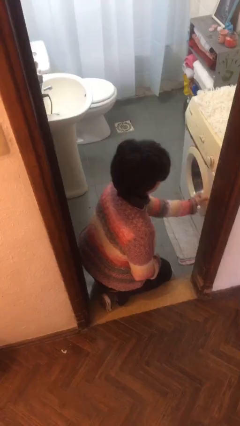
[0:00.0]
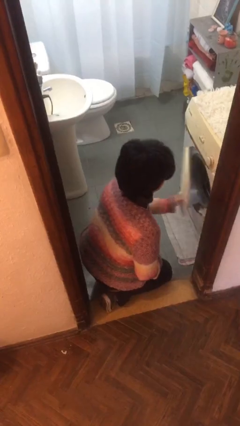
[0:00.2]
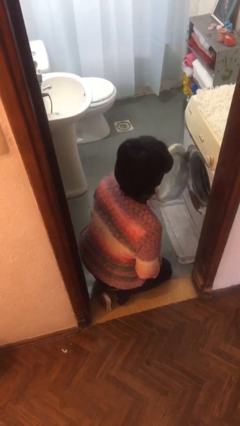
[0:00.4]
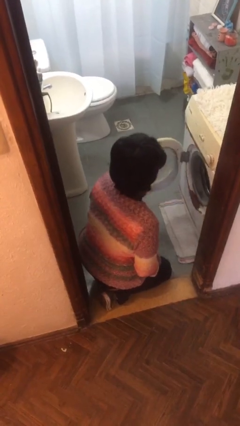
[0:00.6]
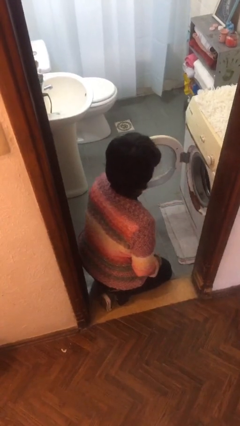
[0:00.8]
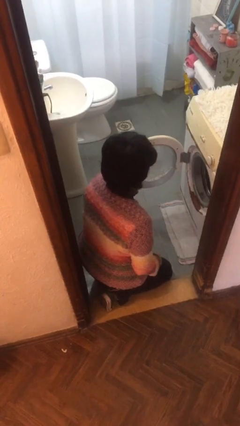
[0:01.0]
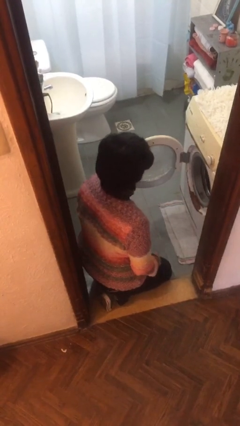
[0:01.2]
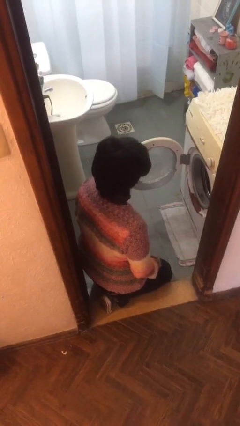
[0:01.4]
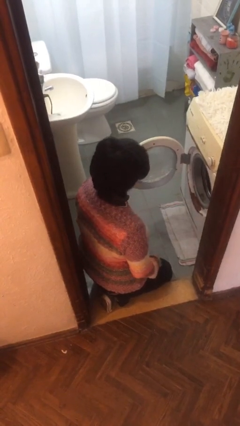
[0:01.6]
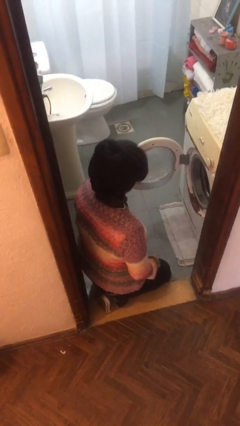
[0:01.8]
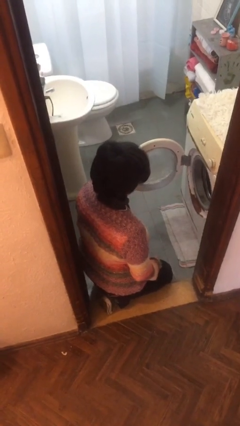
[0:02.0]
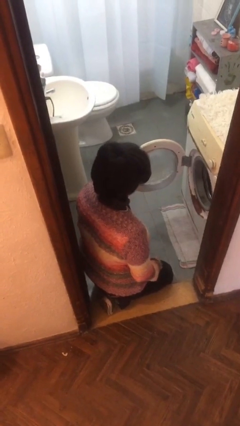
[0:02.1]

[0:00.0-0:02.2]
person opens clothes washer

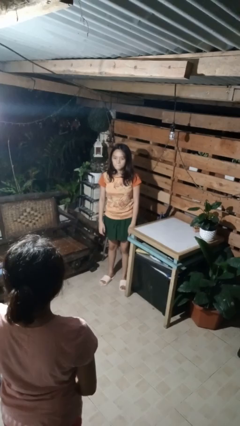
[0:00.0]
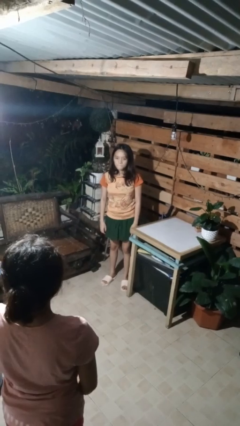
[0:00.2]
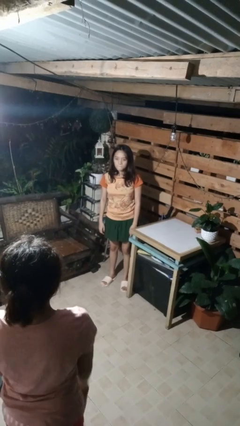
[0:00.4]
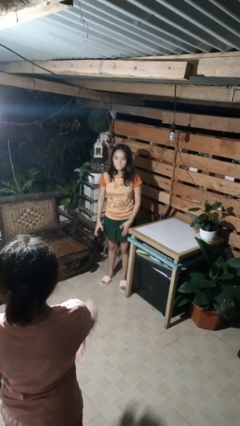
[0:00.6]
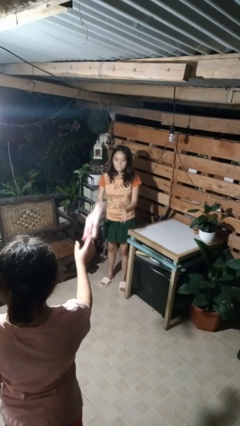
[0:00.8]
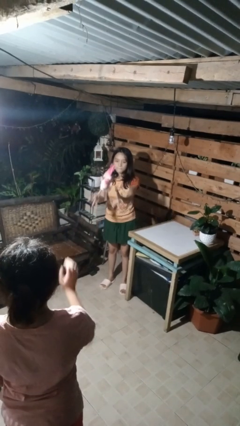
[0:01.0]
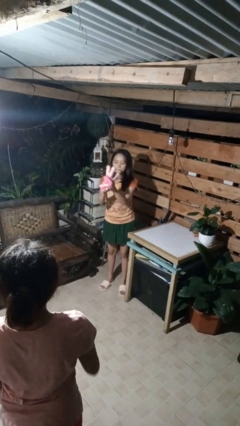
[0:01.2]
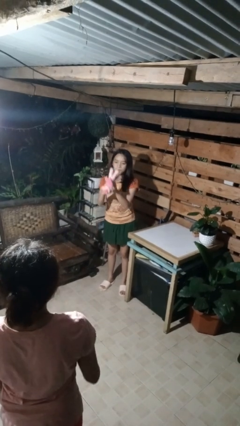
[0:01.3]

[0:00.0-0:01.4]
person catches object from person

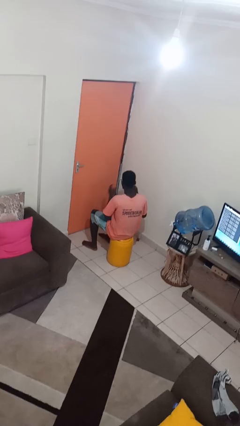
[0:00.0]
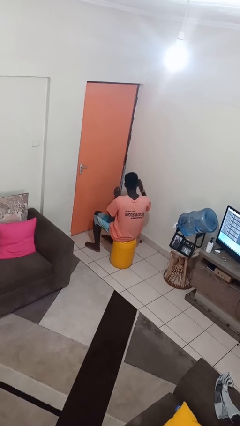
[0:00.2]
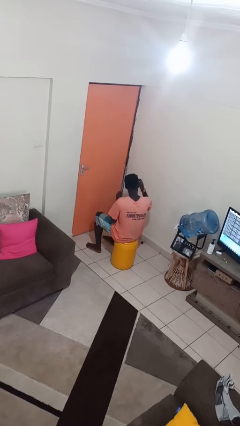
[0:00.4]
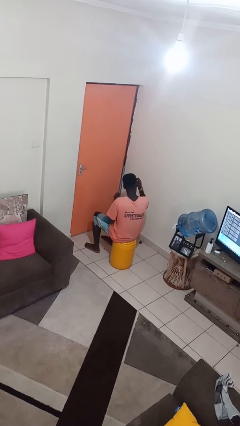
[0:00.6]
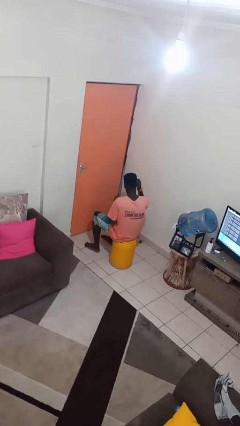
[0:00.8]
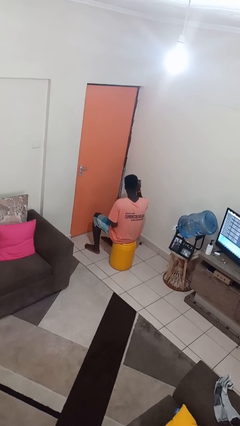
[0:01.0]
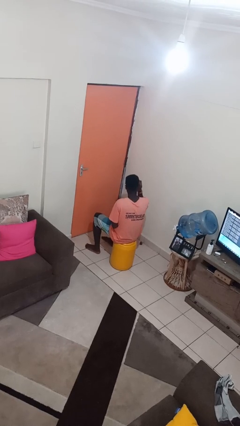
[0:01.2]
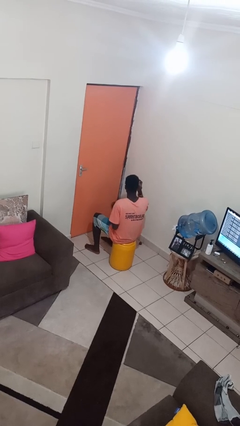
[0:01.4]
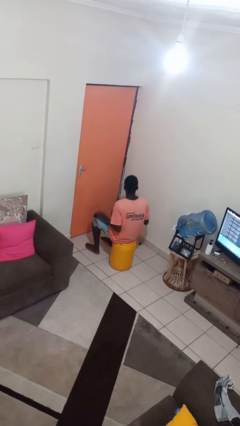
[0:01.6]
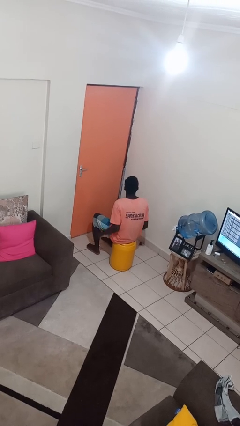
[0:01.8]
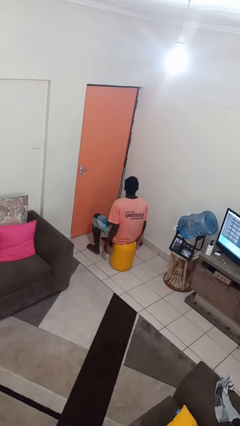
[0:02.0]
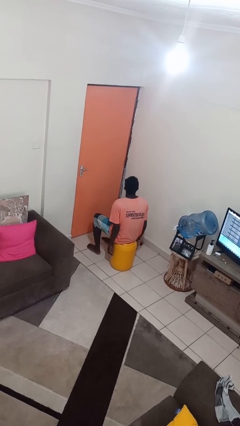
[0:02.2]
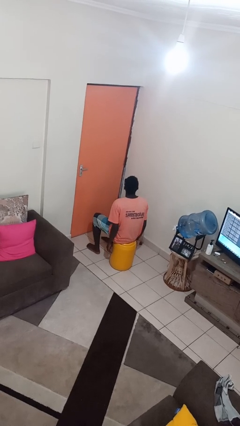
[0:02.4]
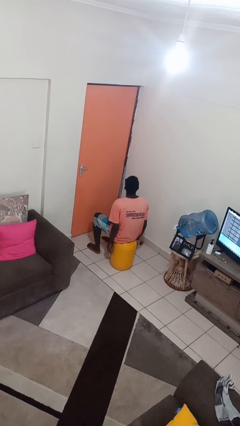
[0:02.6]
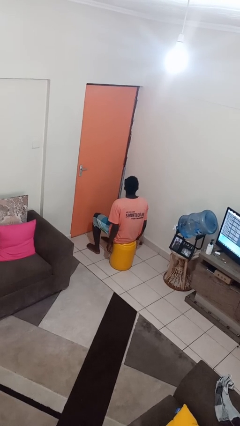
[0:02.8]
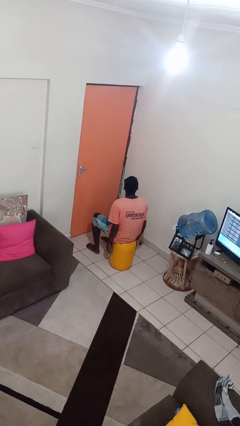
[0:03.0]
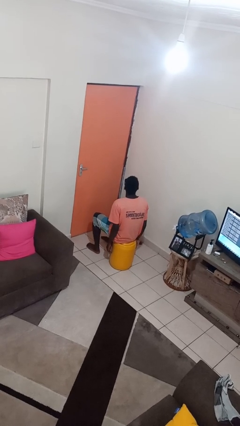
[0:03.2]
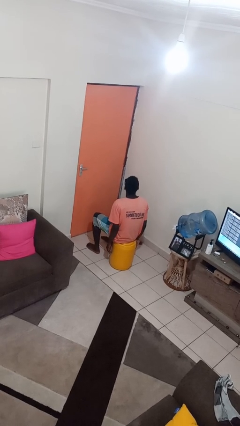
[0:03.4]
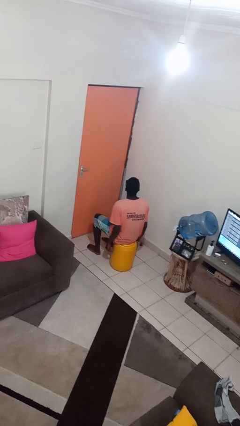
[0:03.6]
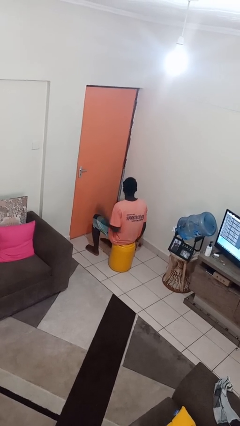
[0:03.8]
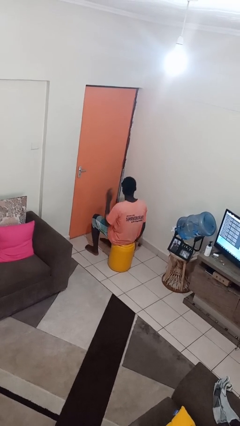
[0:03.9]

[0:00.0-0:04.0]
person puts on sunglasses

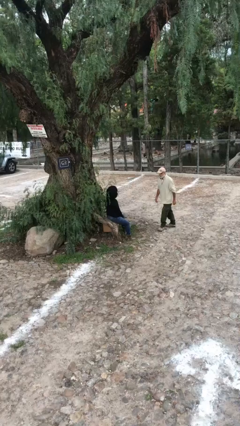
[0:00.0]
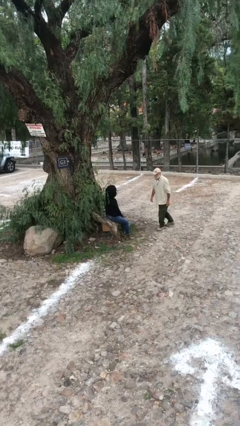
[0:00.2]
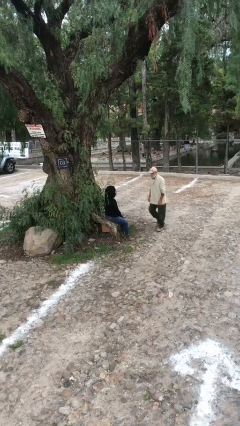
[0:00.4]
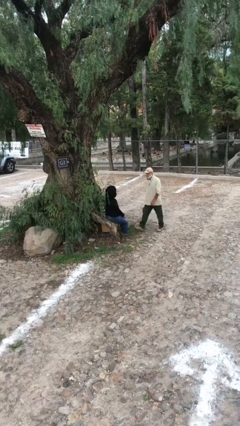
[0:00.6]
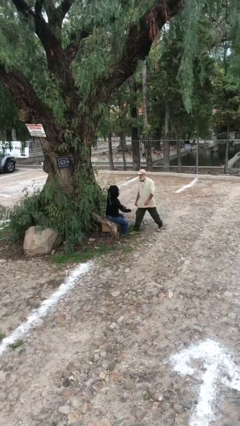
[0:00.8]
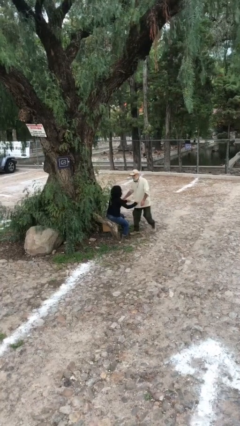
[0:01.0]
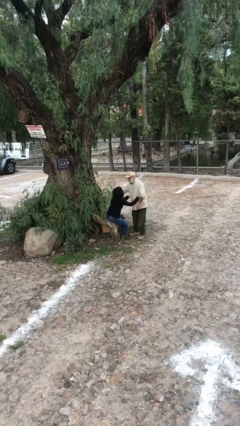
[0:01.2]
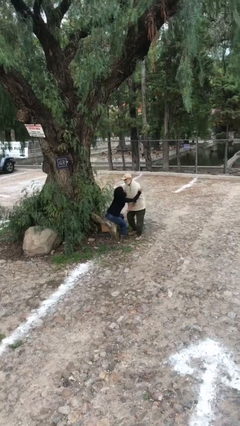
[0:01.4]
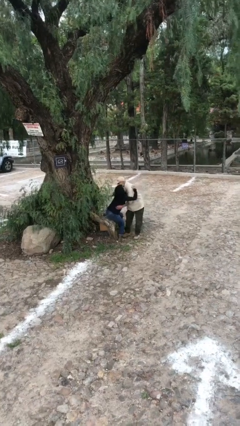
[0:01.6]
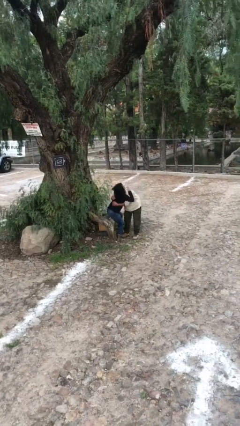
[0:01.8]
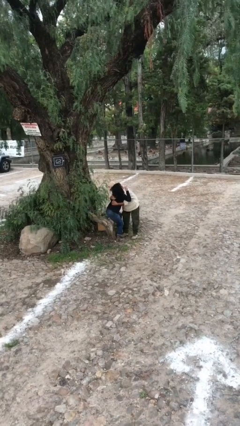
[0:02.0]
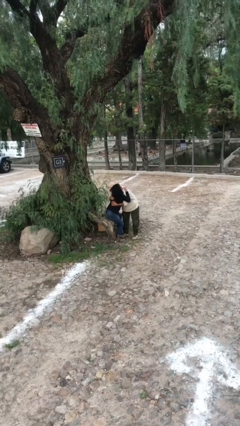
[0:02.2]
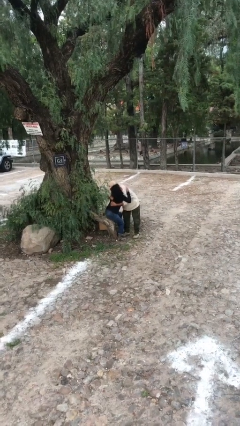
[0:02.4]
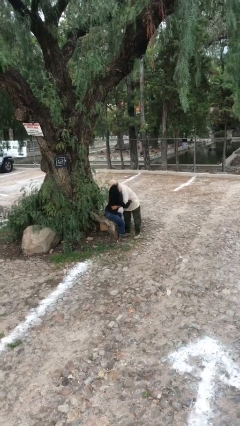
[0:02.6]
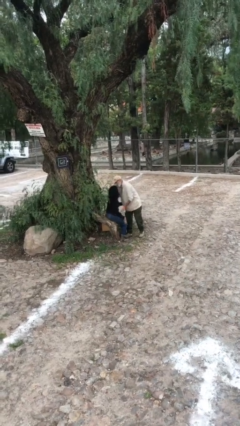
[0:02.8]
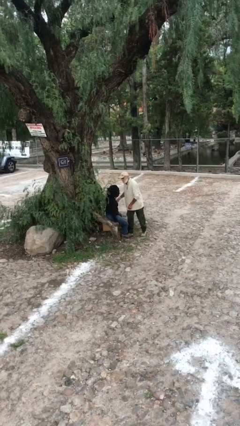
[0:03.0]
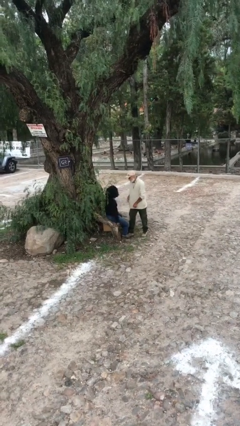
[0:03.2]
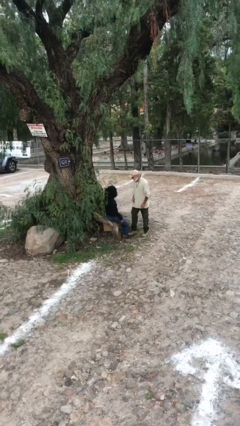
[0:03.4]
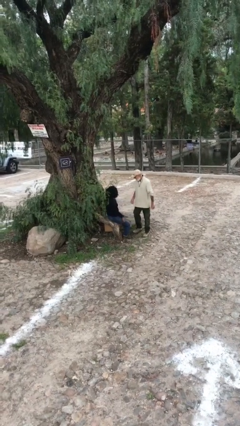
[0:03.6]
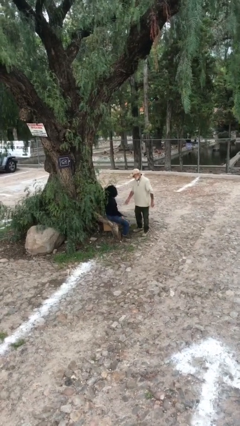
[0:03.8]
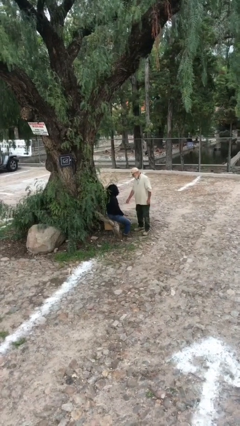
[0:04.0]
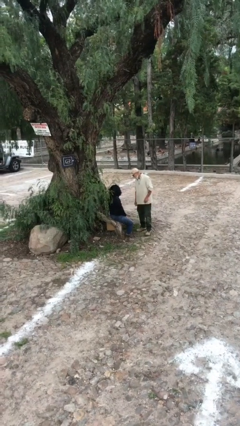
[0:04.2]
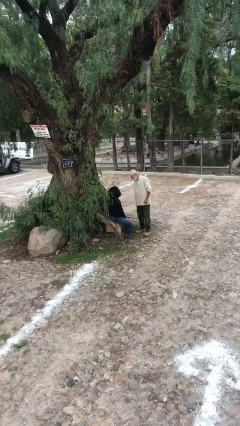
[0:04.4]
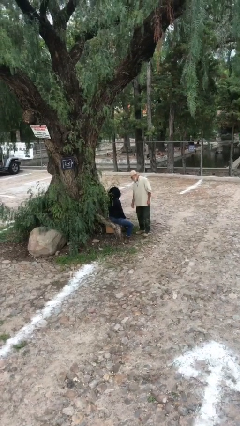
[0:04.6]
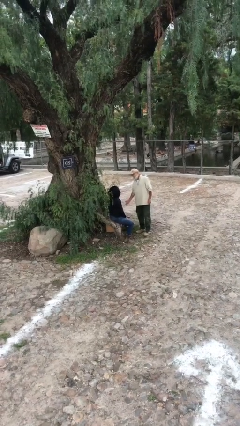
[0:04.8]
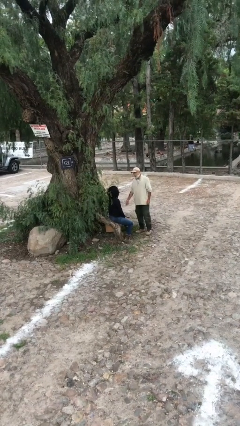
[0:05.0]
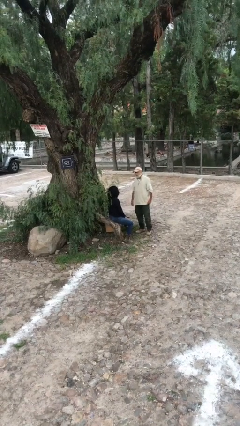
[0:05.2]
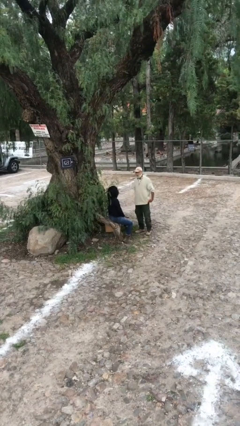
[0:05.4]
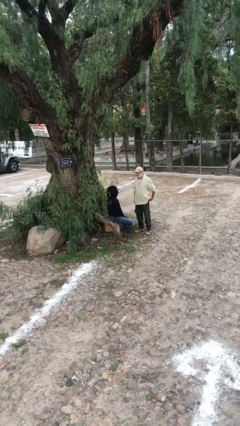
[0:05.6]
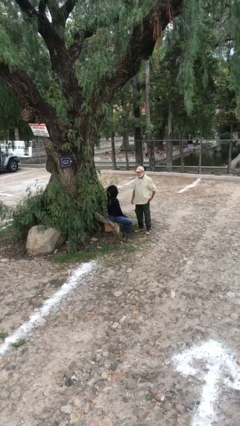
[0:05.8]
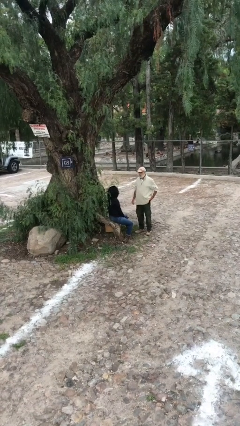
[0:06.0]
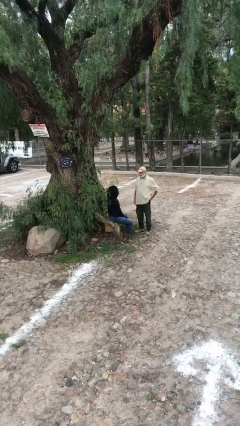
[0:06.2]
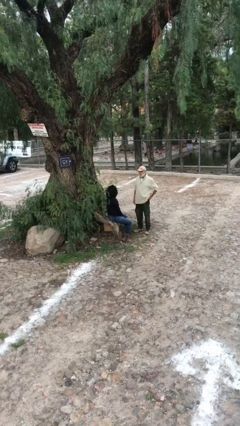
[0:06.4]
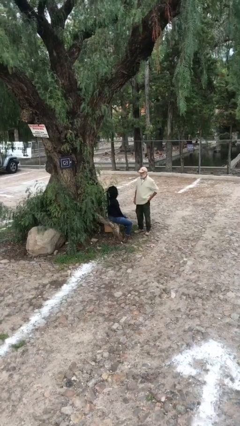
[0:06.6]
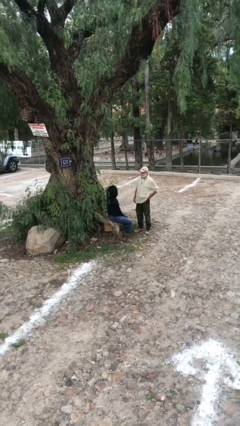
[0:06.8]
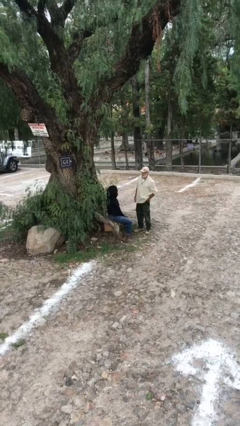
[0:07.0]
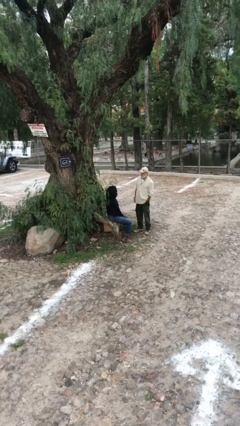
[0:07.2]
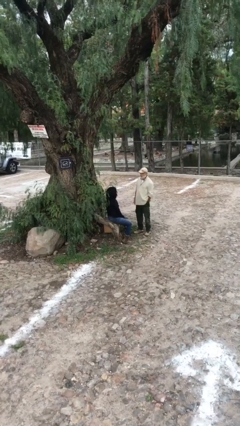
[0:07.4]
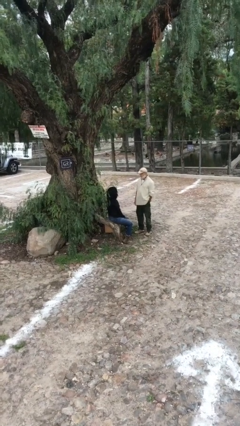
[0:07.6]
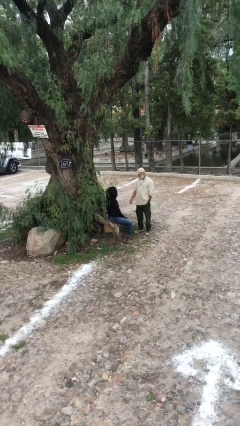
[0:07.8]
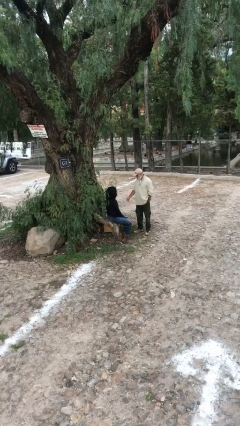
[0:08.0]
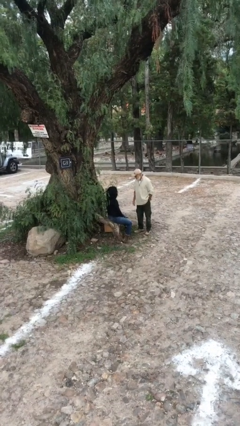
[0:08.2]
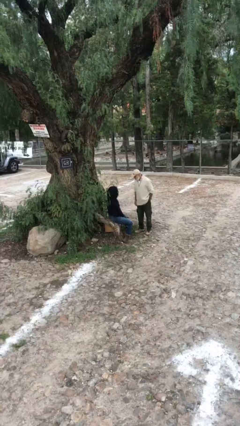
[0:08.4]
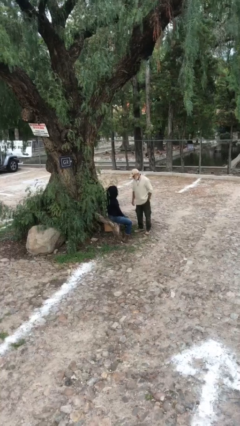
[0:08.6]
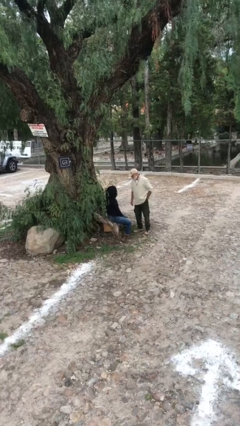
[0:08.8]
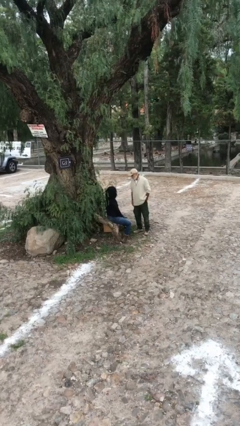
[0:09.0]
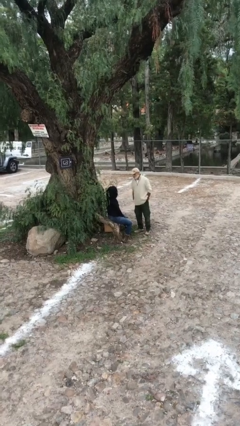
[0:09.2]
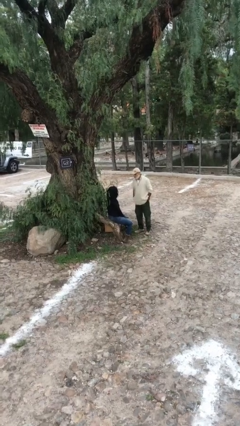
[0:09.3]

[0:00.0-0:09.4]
person embraces person

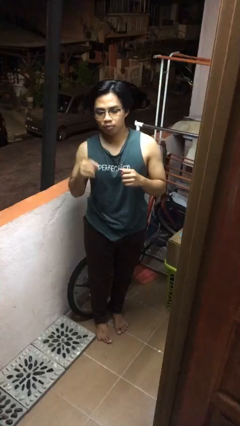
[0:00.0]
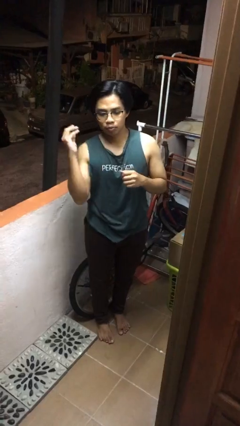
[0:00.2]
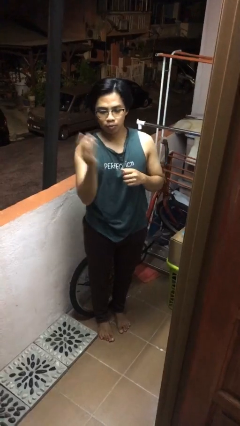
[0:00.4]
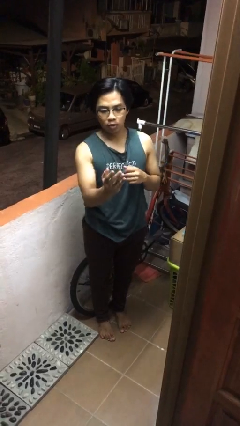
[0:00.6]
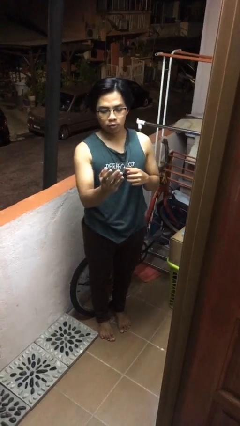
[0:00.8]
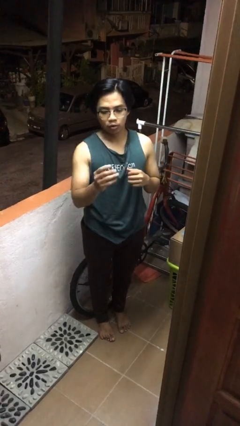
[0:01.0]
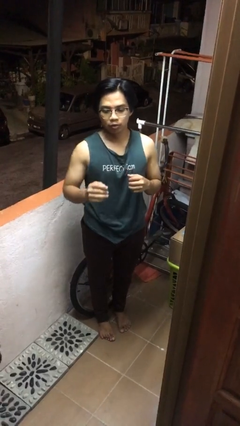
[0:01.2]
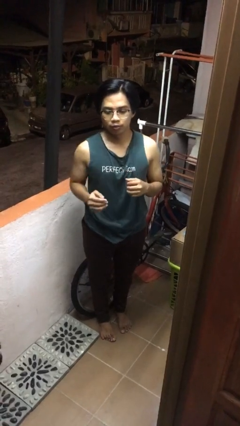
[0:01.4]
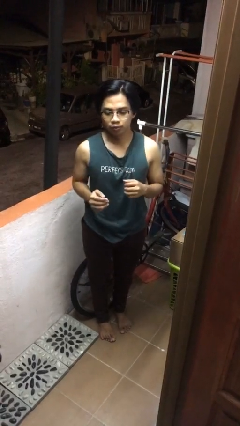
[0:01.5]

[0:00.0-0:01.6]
person karate chop
